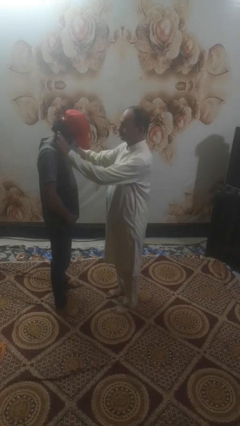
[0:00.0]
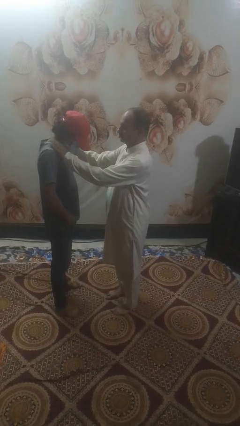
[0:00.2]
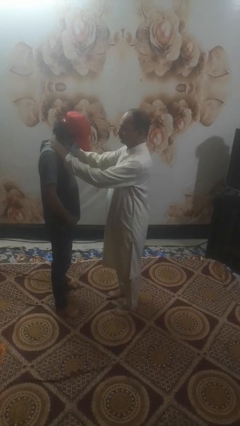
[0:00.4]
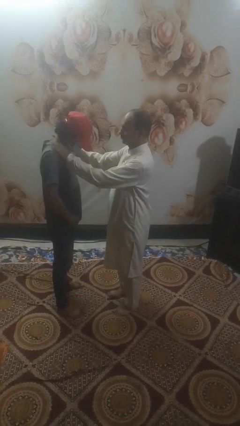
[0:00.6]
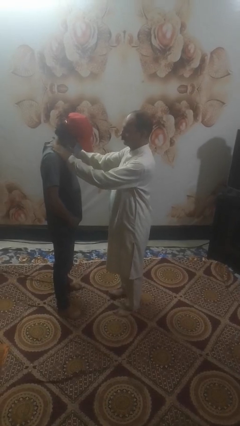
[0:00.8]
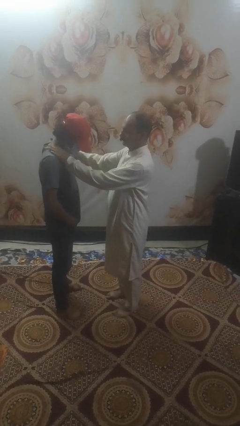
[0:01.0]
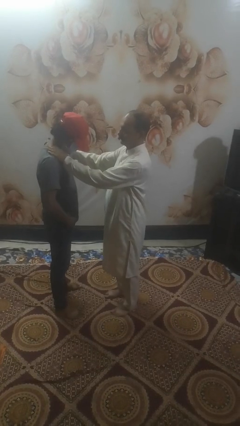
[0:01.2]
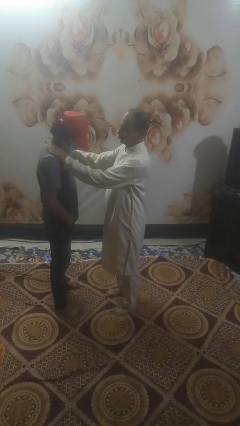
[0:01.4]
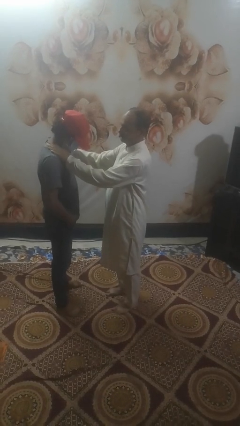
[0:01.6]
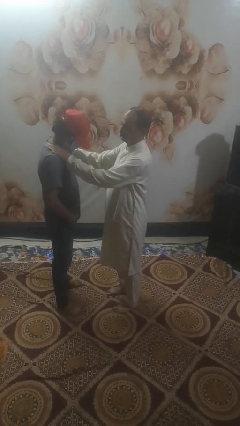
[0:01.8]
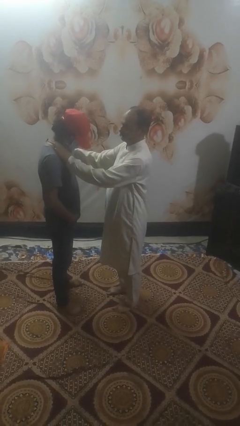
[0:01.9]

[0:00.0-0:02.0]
person pounds shoulders of person

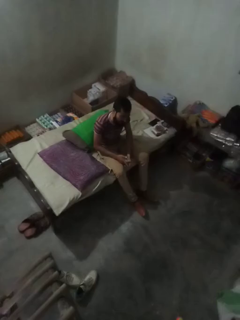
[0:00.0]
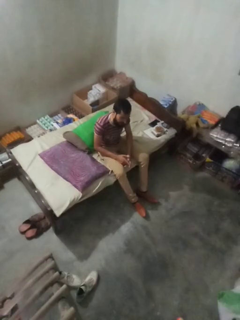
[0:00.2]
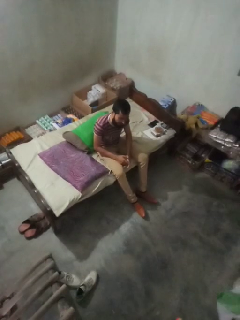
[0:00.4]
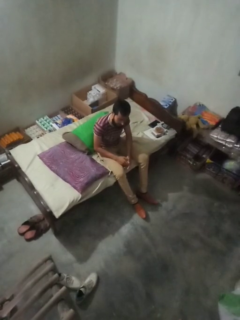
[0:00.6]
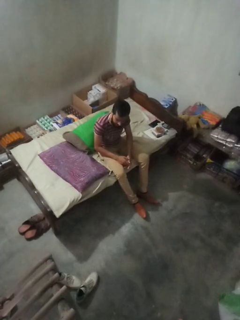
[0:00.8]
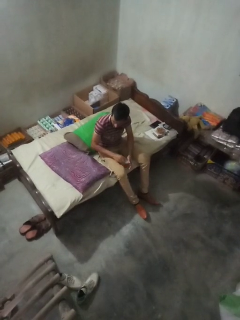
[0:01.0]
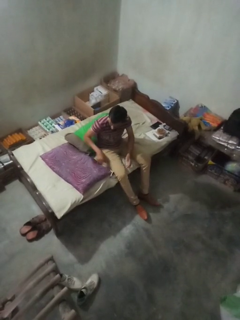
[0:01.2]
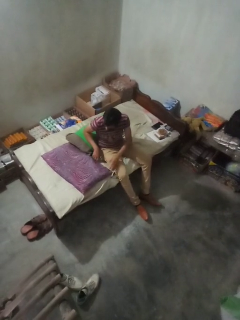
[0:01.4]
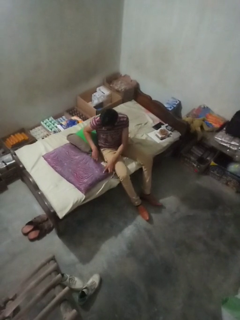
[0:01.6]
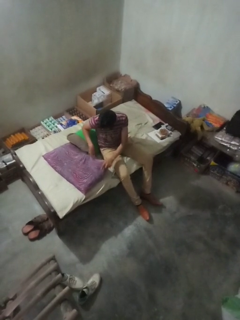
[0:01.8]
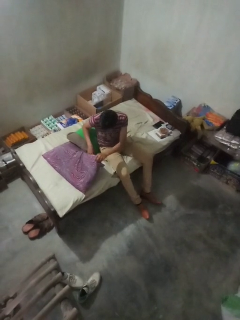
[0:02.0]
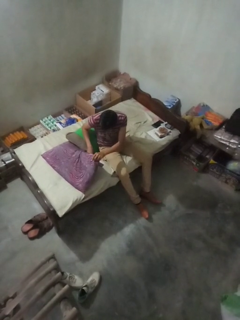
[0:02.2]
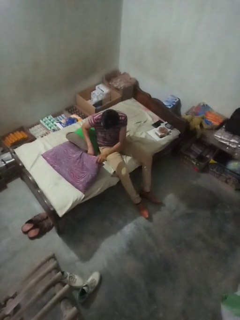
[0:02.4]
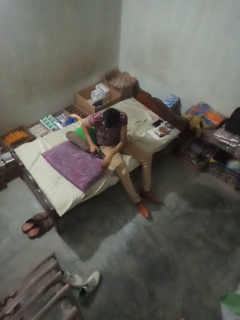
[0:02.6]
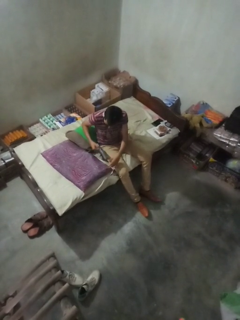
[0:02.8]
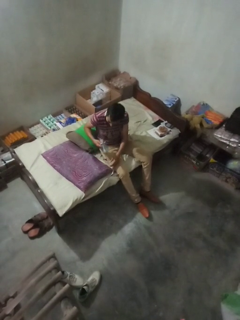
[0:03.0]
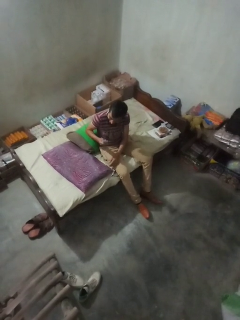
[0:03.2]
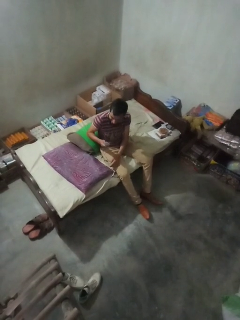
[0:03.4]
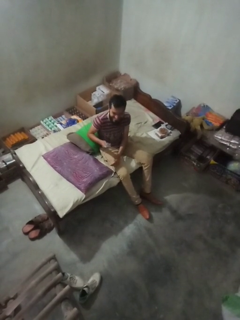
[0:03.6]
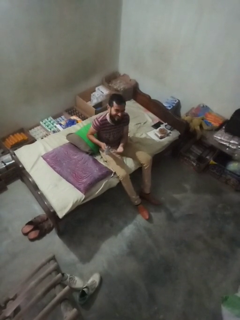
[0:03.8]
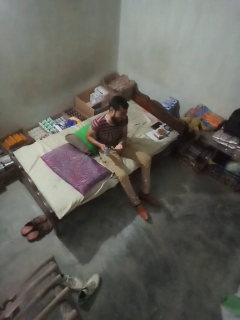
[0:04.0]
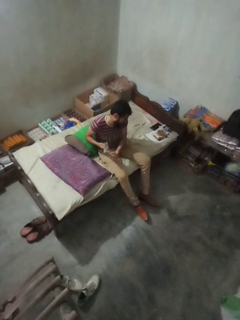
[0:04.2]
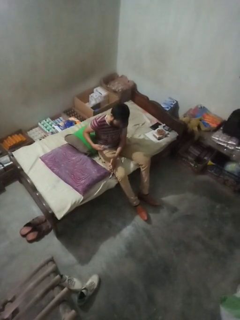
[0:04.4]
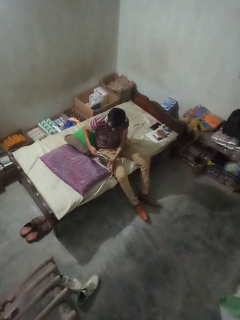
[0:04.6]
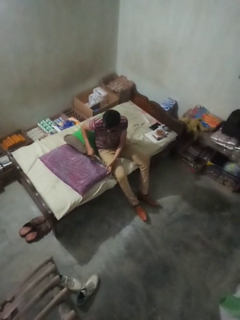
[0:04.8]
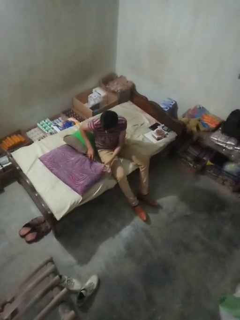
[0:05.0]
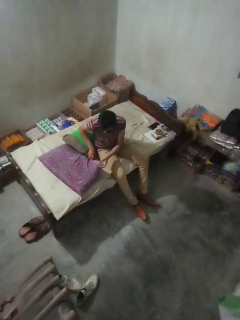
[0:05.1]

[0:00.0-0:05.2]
person searches in couch

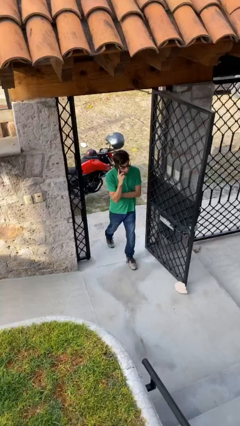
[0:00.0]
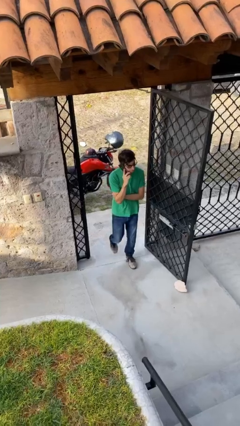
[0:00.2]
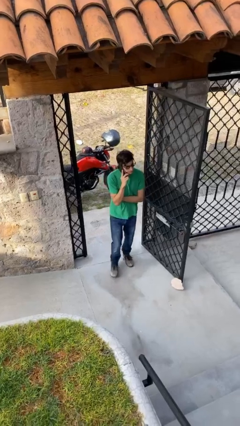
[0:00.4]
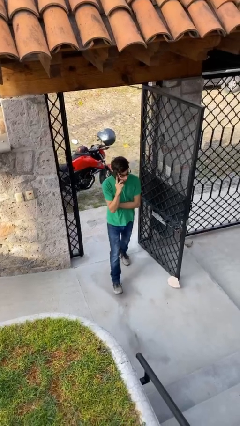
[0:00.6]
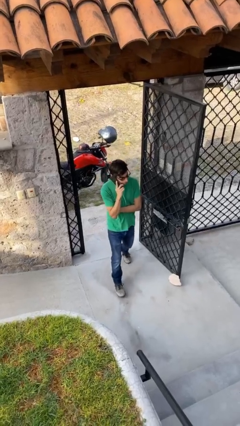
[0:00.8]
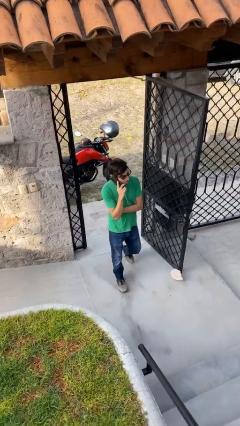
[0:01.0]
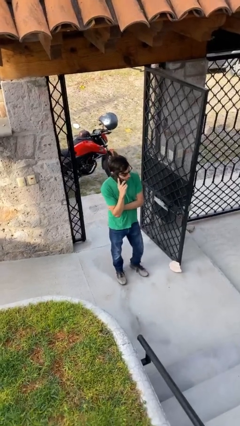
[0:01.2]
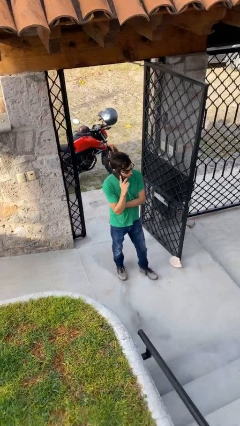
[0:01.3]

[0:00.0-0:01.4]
person enters scene through structure

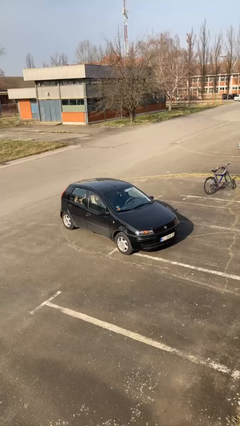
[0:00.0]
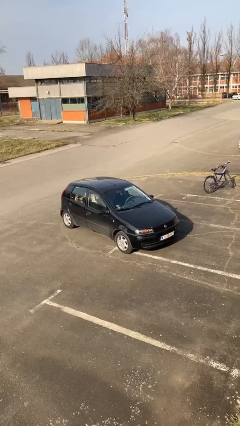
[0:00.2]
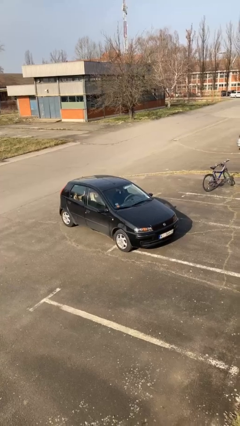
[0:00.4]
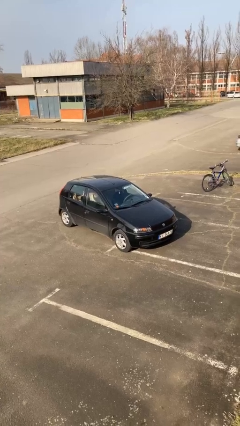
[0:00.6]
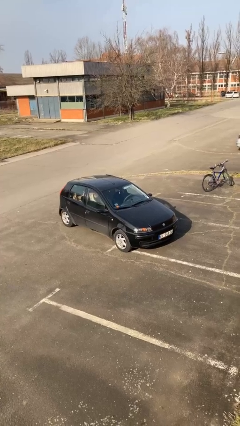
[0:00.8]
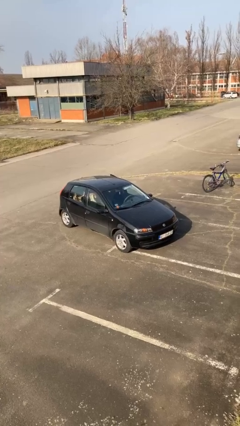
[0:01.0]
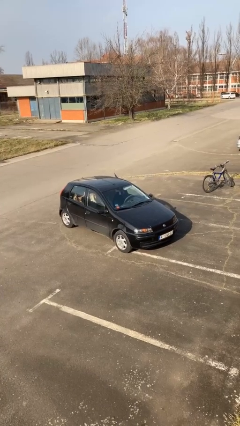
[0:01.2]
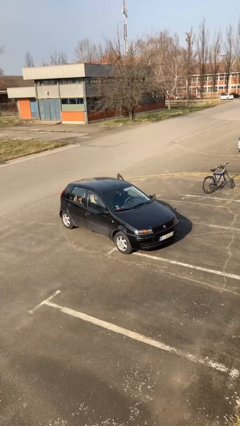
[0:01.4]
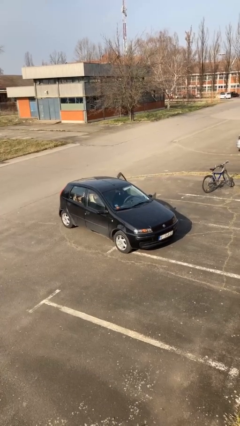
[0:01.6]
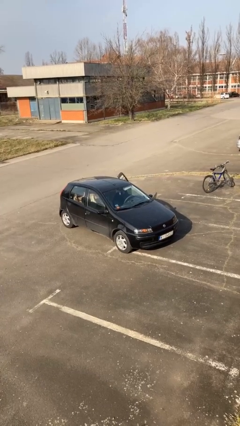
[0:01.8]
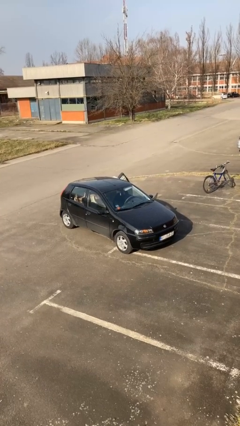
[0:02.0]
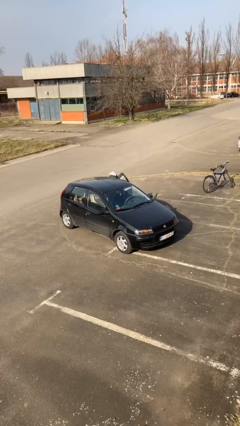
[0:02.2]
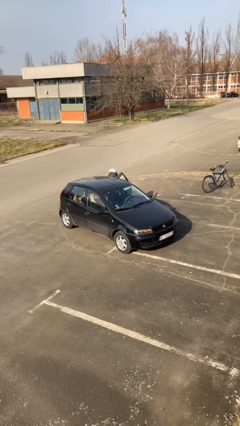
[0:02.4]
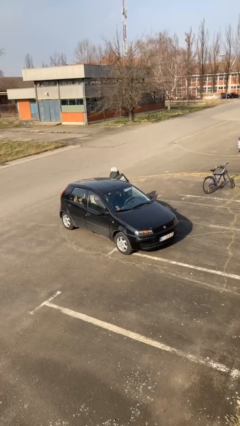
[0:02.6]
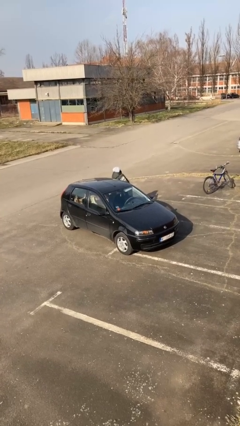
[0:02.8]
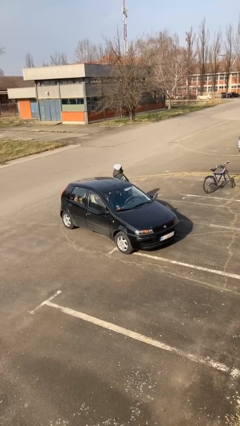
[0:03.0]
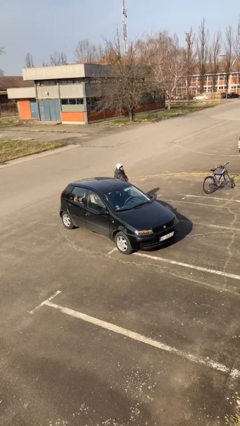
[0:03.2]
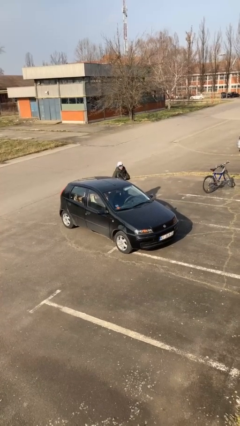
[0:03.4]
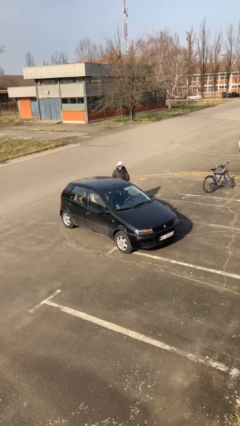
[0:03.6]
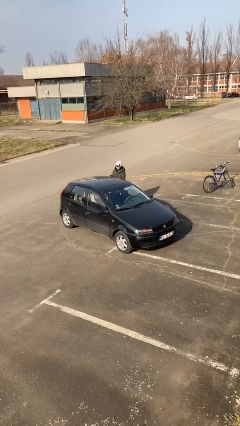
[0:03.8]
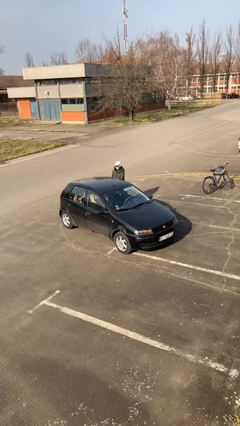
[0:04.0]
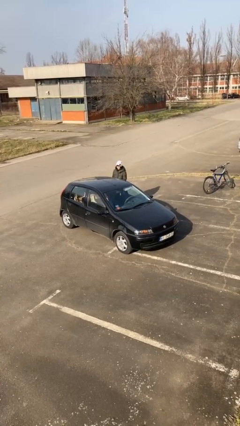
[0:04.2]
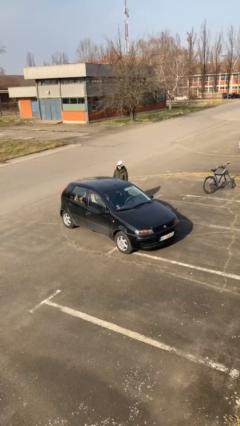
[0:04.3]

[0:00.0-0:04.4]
car drops off person

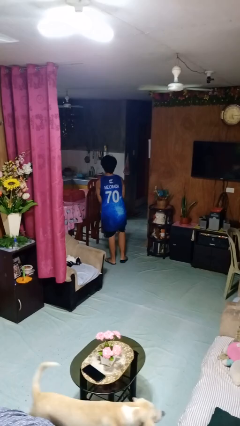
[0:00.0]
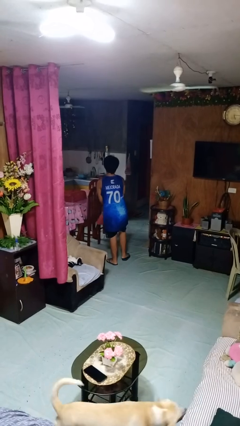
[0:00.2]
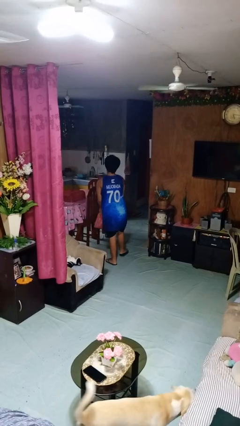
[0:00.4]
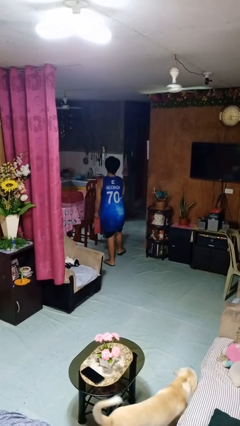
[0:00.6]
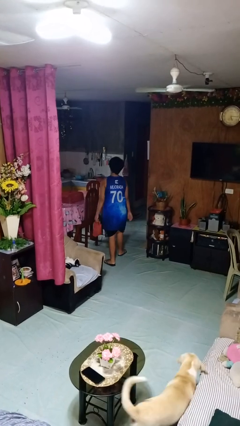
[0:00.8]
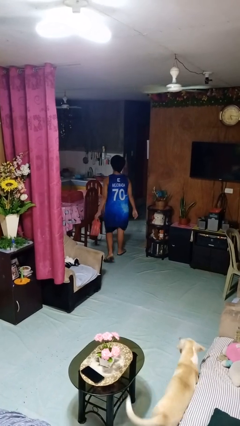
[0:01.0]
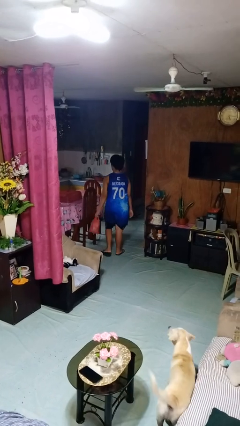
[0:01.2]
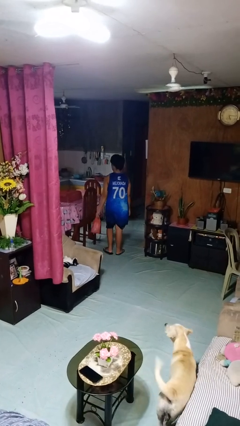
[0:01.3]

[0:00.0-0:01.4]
person carries groceries

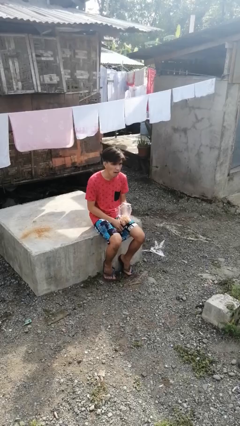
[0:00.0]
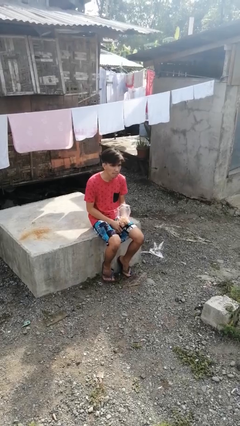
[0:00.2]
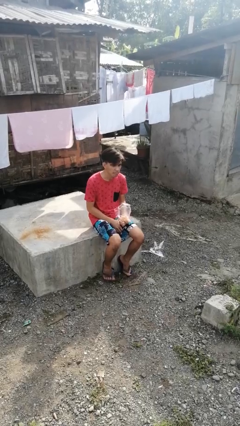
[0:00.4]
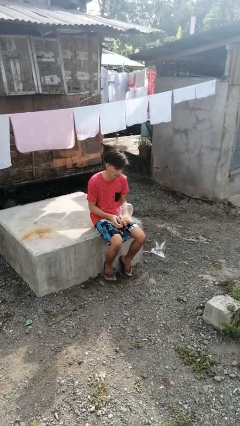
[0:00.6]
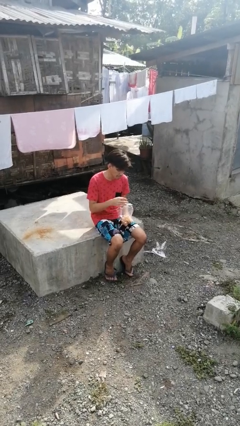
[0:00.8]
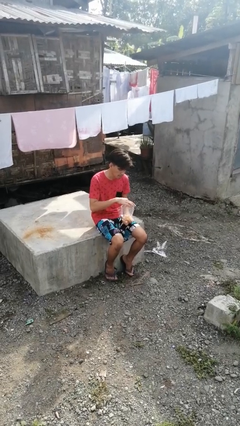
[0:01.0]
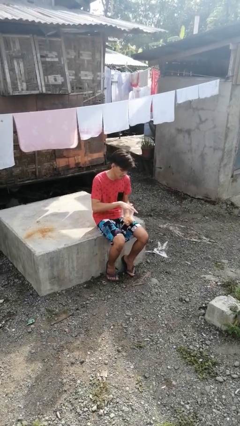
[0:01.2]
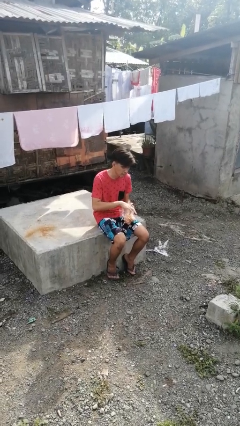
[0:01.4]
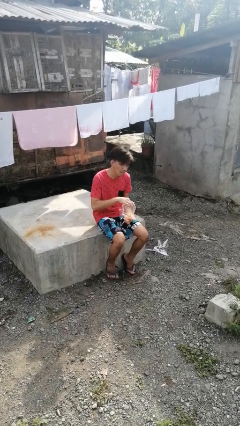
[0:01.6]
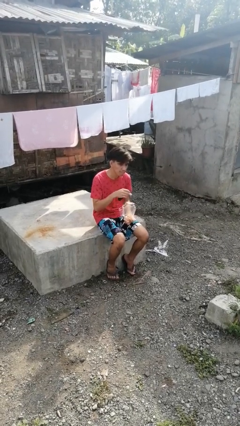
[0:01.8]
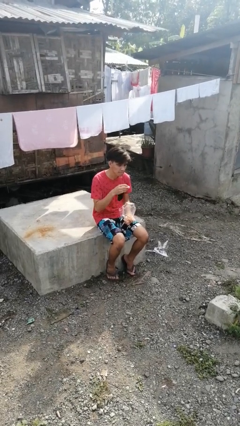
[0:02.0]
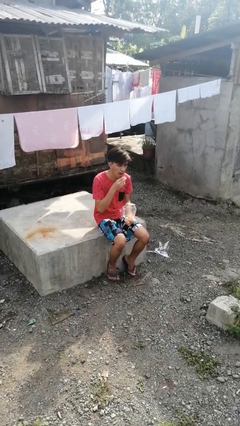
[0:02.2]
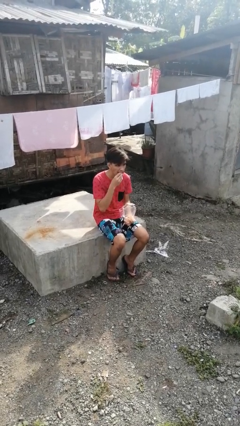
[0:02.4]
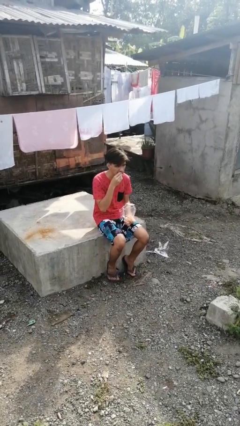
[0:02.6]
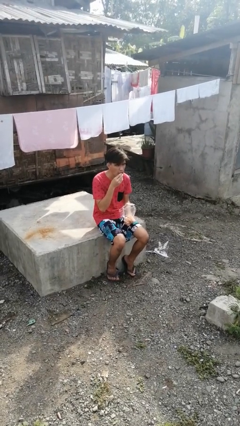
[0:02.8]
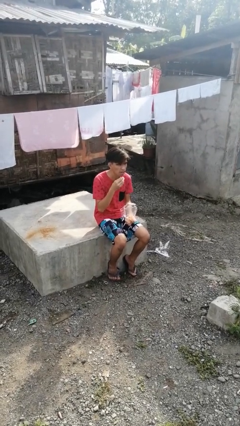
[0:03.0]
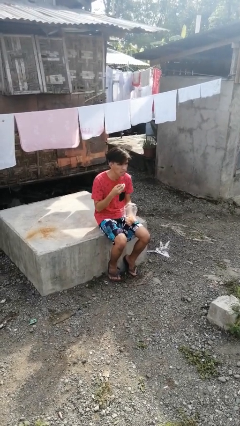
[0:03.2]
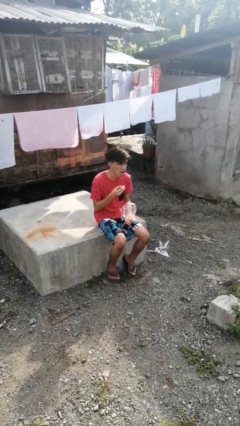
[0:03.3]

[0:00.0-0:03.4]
person eats snack from bag

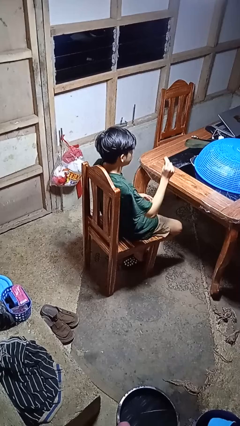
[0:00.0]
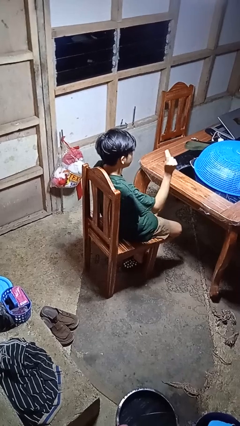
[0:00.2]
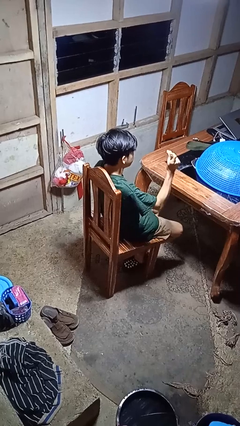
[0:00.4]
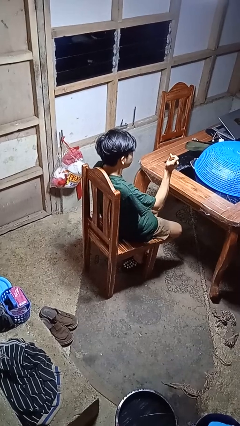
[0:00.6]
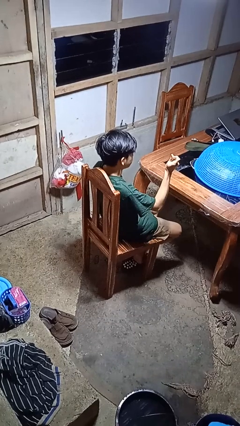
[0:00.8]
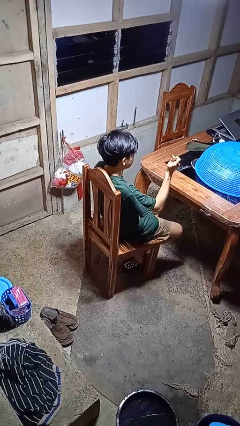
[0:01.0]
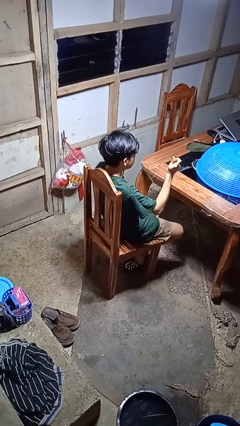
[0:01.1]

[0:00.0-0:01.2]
person snaps fingers
